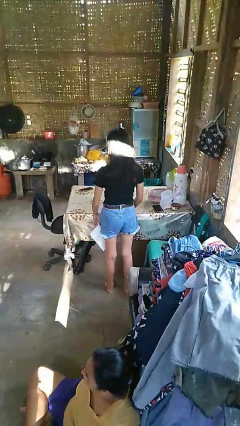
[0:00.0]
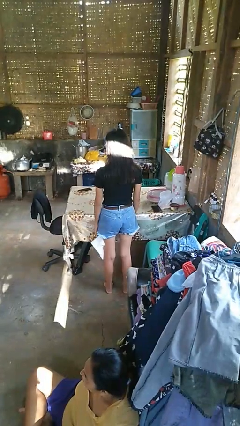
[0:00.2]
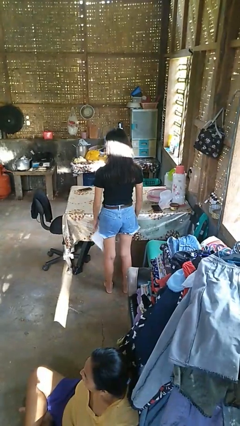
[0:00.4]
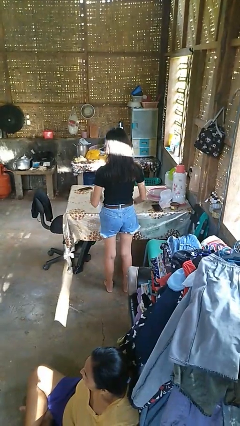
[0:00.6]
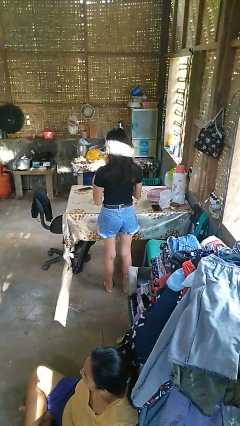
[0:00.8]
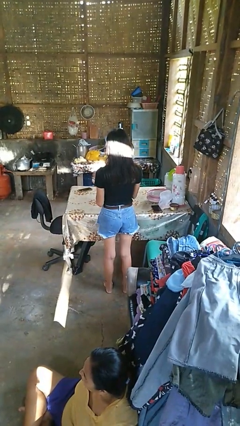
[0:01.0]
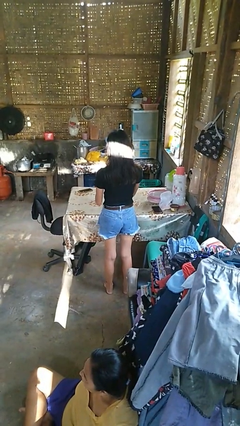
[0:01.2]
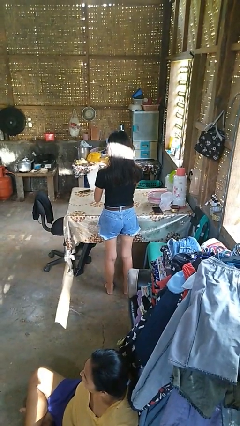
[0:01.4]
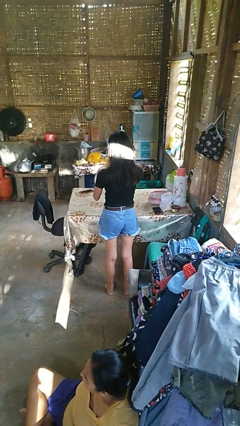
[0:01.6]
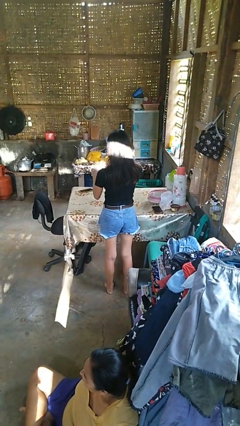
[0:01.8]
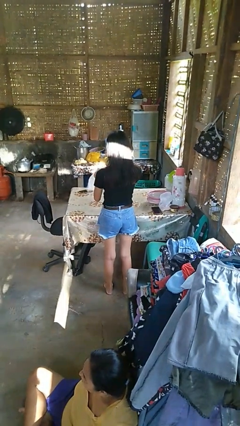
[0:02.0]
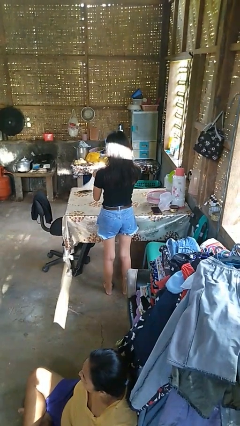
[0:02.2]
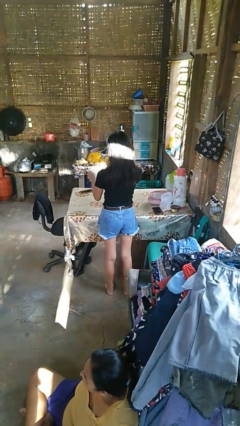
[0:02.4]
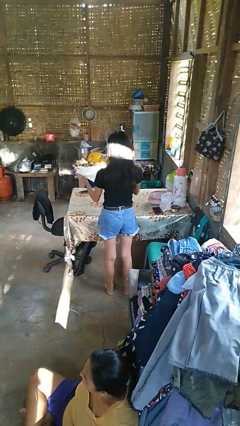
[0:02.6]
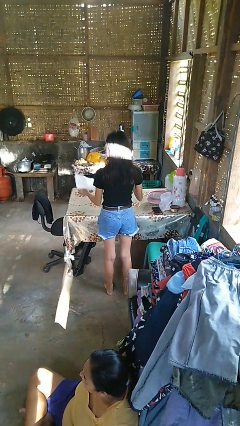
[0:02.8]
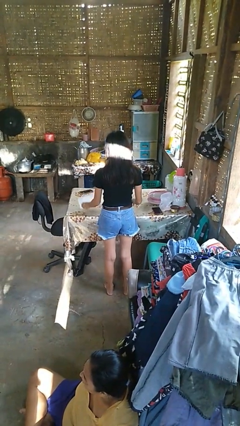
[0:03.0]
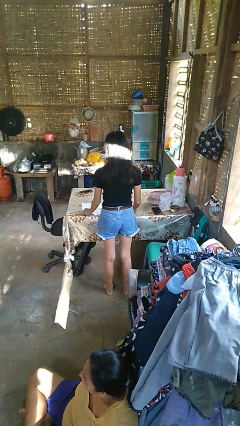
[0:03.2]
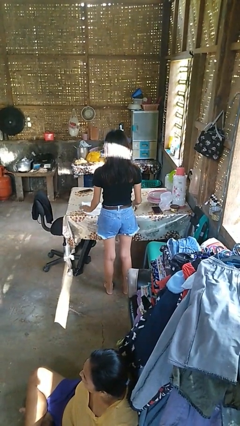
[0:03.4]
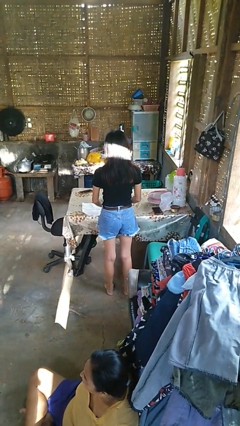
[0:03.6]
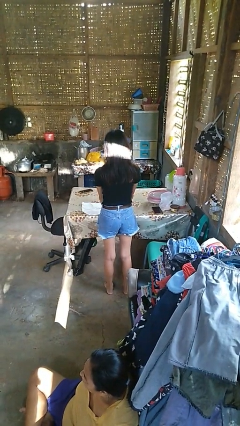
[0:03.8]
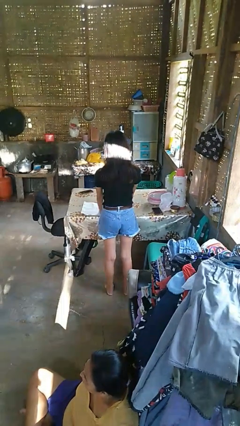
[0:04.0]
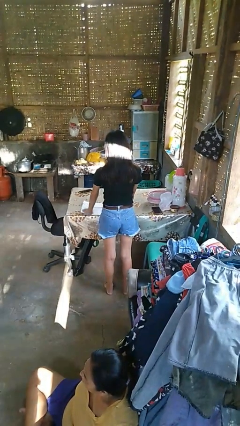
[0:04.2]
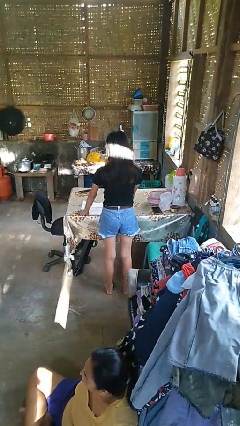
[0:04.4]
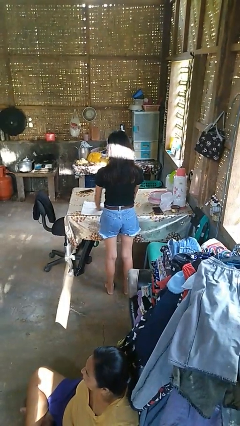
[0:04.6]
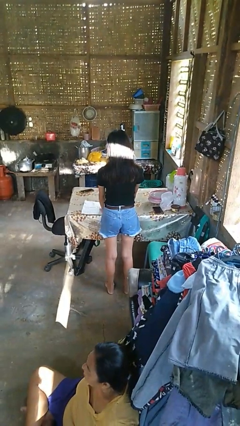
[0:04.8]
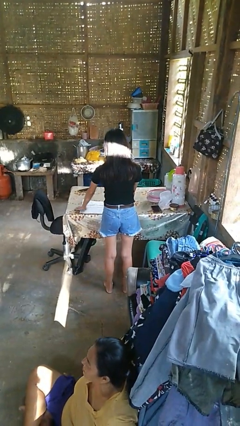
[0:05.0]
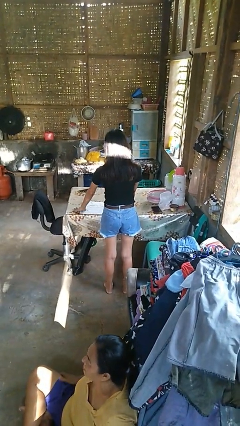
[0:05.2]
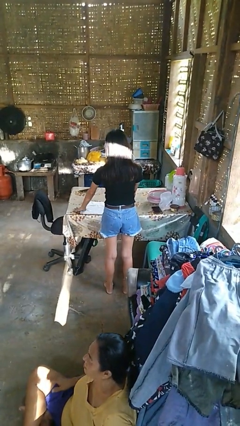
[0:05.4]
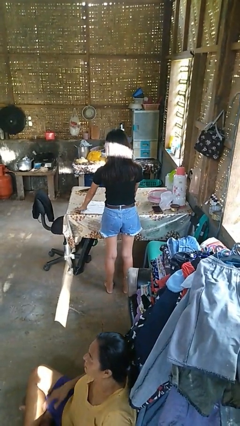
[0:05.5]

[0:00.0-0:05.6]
person spreads tablecloth

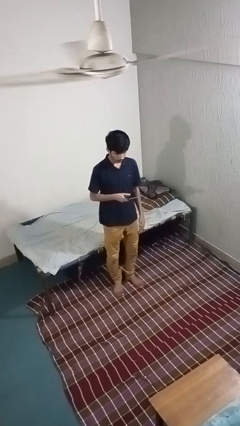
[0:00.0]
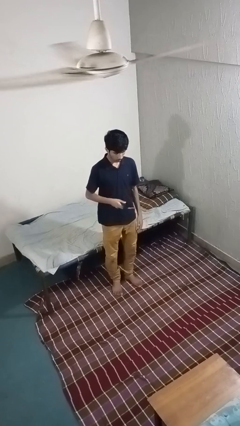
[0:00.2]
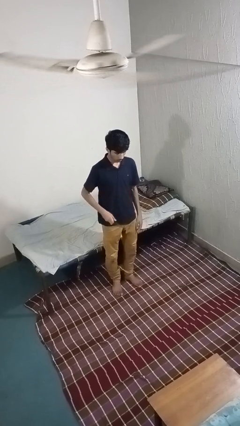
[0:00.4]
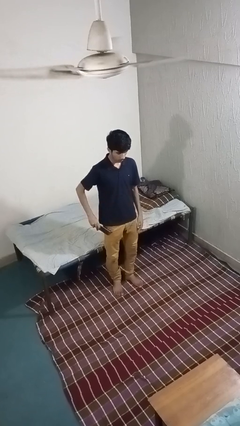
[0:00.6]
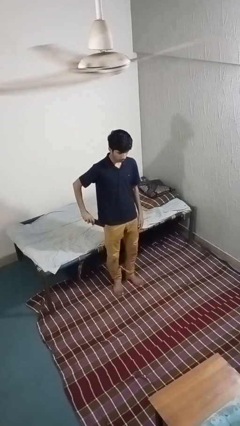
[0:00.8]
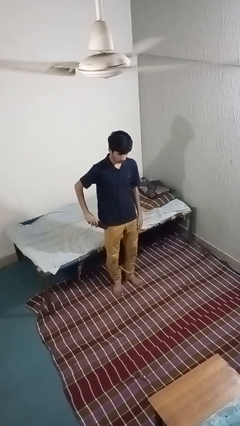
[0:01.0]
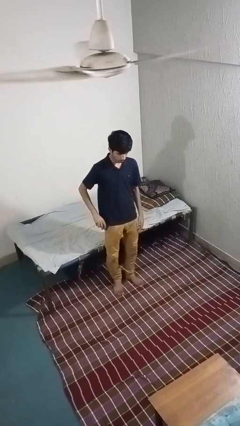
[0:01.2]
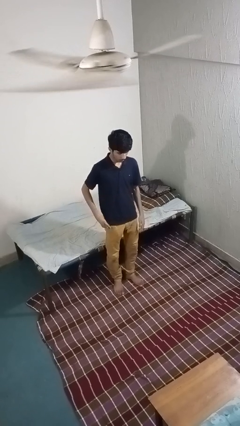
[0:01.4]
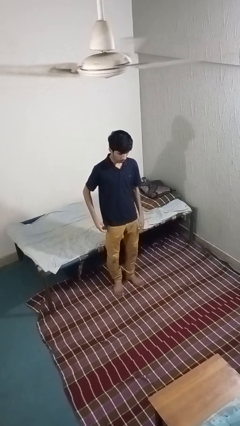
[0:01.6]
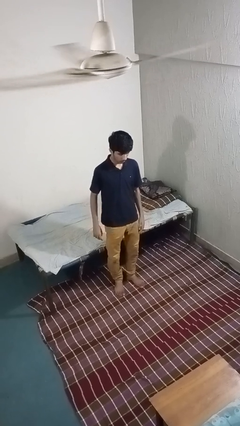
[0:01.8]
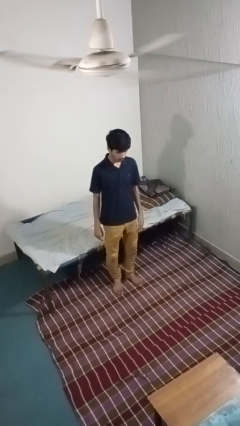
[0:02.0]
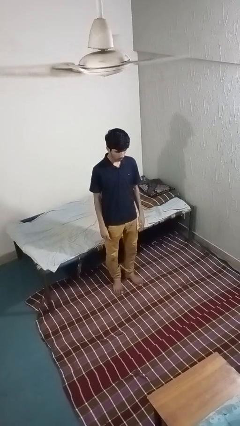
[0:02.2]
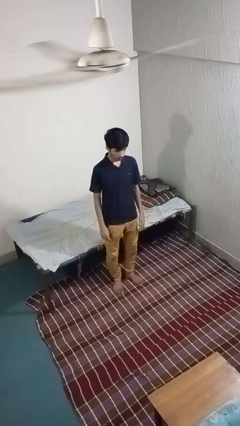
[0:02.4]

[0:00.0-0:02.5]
person puts phone into pocket

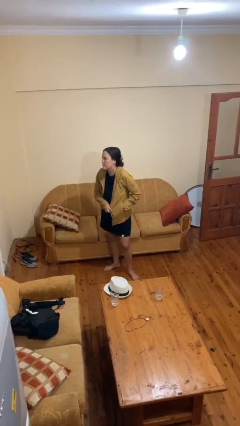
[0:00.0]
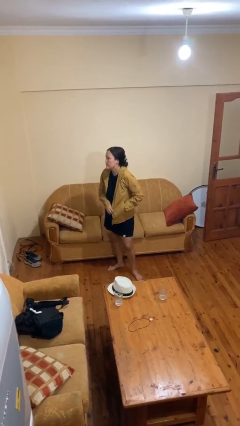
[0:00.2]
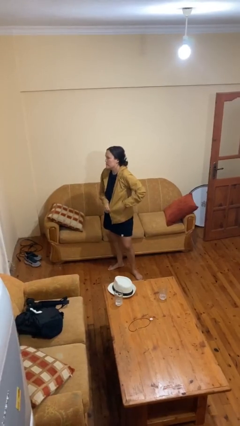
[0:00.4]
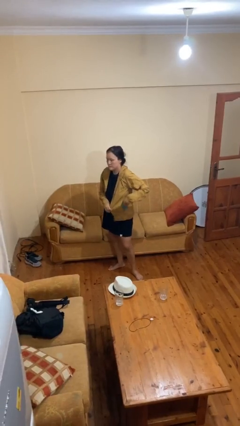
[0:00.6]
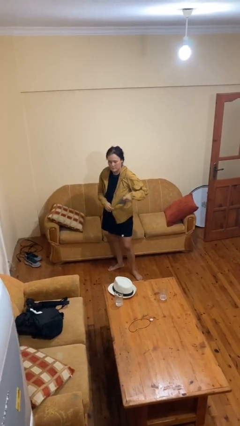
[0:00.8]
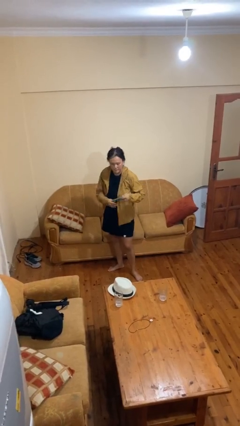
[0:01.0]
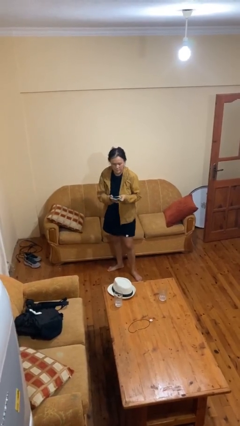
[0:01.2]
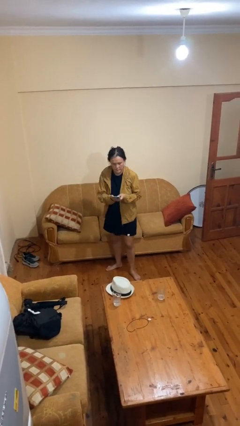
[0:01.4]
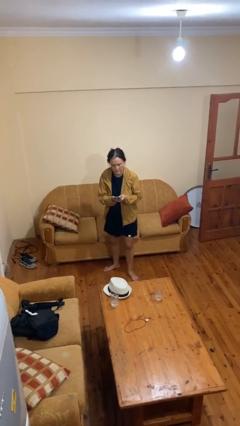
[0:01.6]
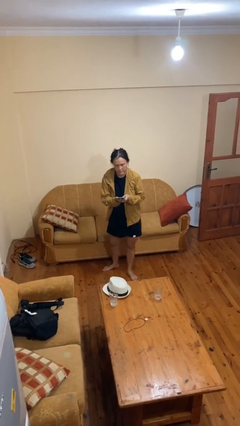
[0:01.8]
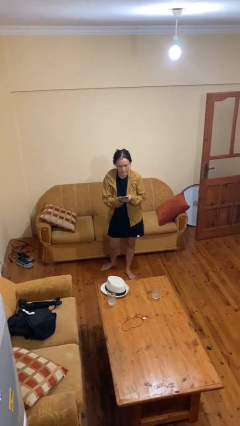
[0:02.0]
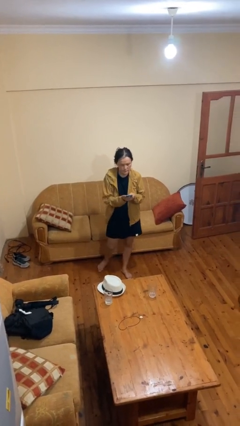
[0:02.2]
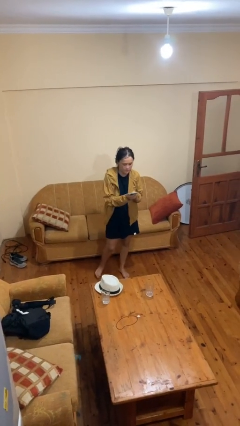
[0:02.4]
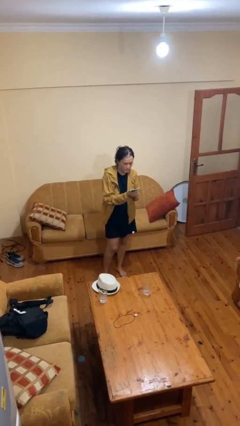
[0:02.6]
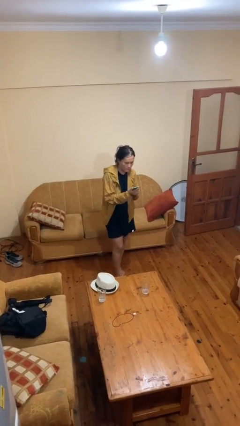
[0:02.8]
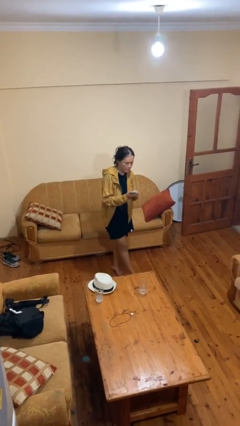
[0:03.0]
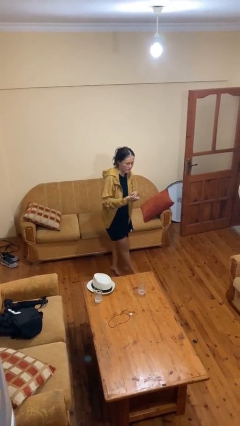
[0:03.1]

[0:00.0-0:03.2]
person takes phone from pocket

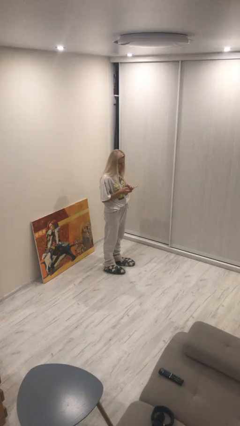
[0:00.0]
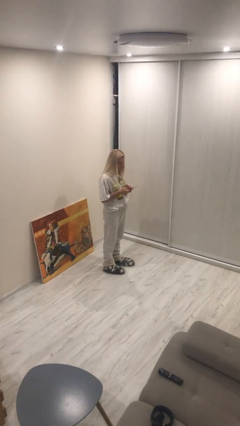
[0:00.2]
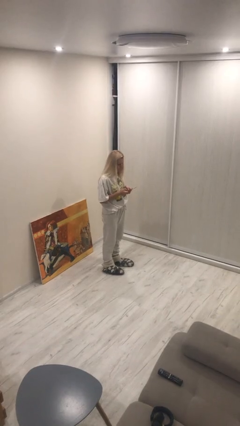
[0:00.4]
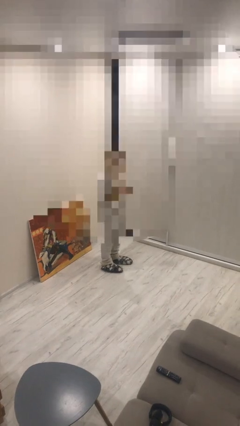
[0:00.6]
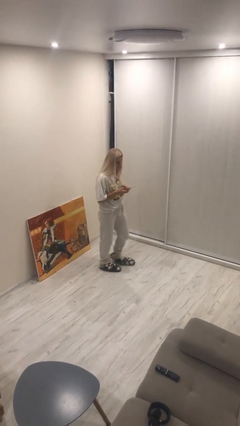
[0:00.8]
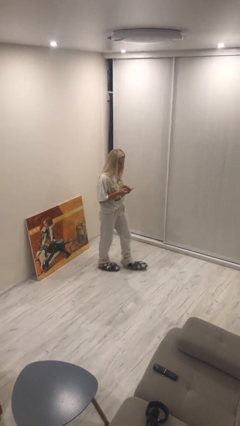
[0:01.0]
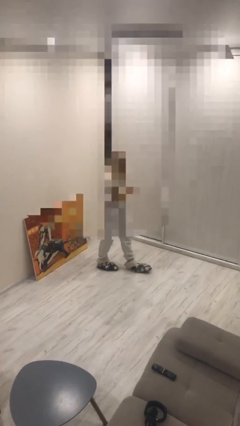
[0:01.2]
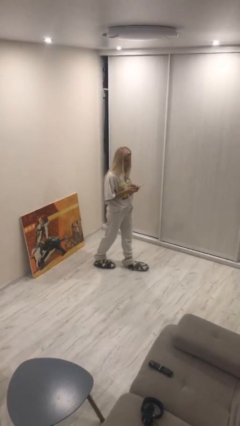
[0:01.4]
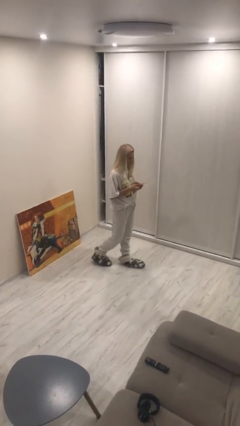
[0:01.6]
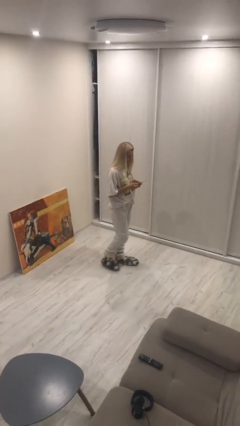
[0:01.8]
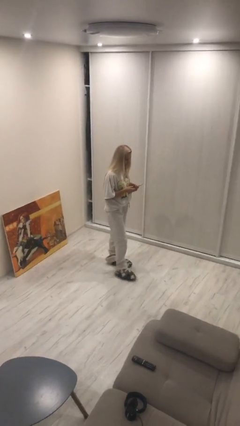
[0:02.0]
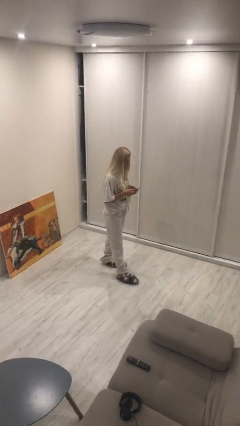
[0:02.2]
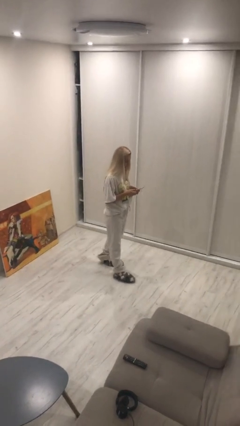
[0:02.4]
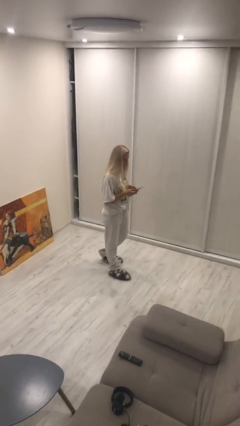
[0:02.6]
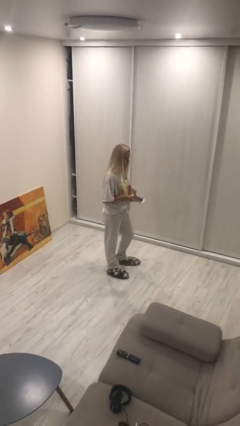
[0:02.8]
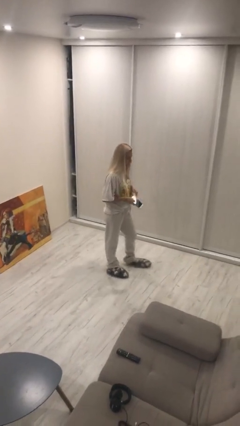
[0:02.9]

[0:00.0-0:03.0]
person texts on phone

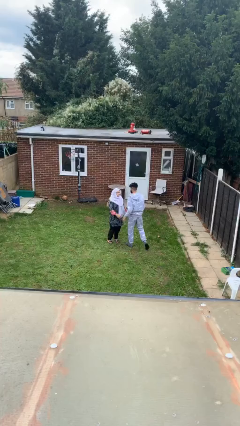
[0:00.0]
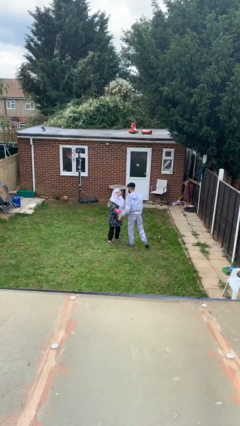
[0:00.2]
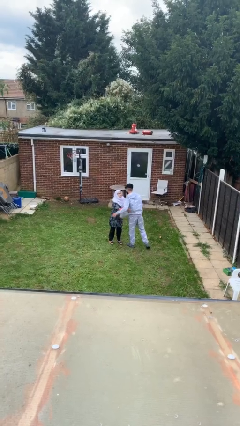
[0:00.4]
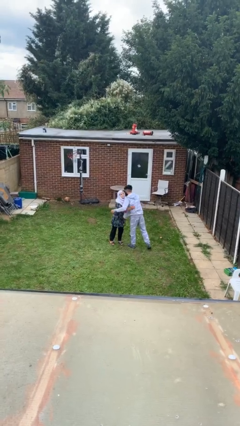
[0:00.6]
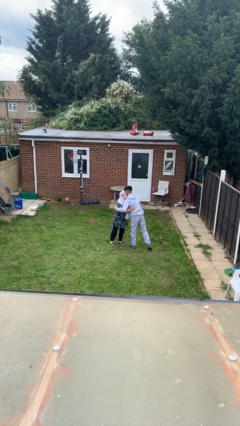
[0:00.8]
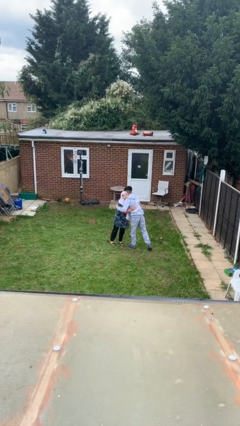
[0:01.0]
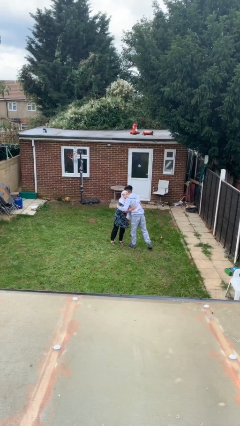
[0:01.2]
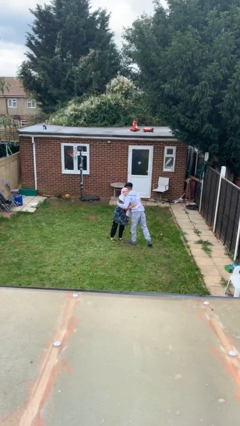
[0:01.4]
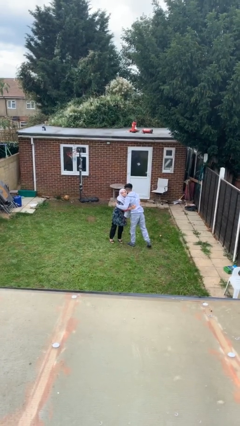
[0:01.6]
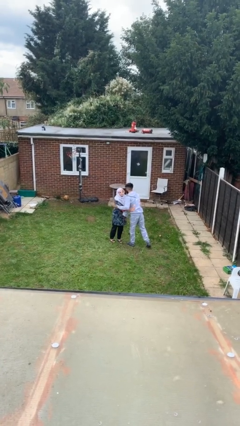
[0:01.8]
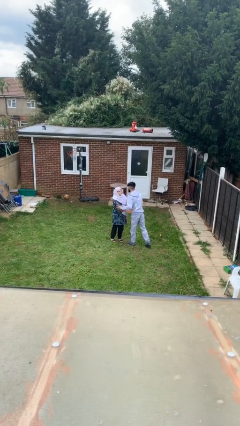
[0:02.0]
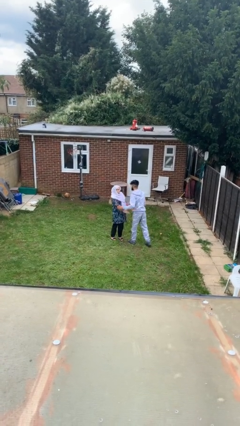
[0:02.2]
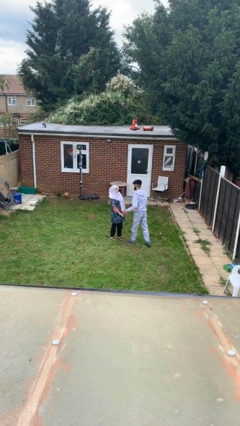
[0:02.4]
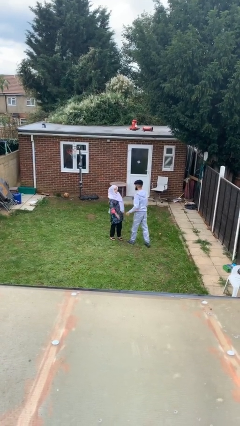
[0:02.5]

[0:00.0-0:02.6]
person embraces person
